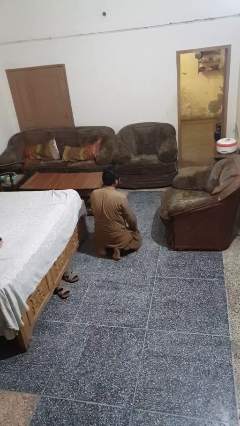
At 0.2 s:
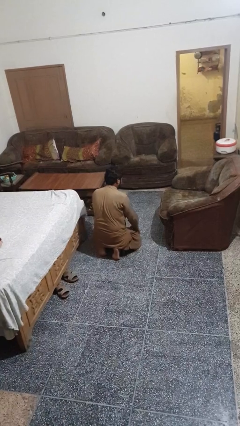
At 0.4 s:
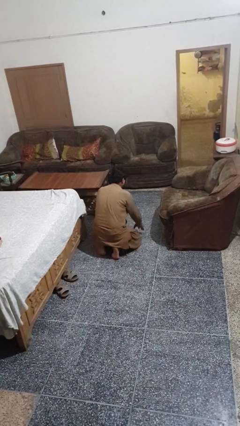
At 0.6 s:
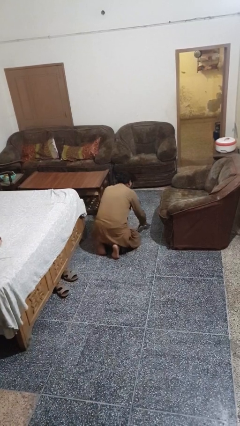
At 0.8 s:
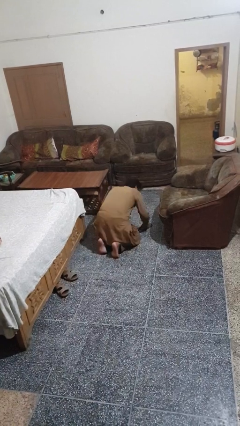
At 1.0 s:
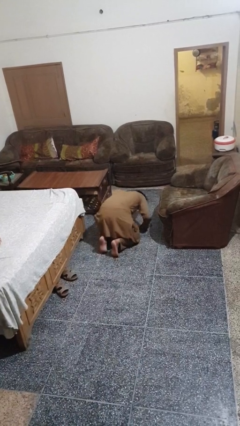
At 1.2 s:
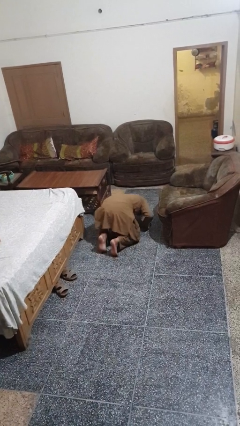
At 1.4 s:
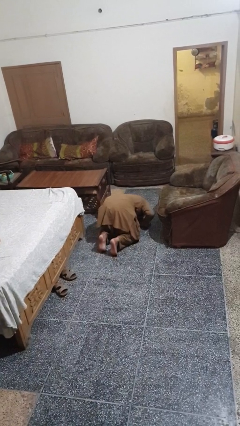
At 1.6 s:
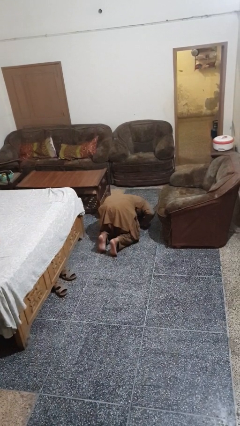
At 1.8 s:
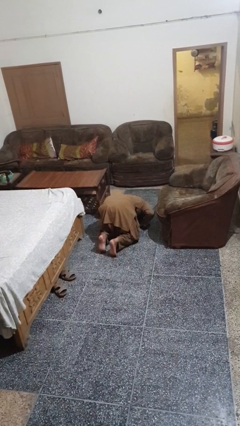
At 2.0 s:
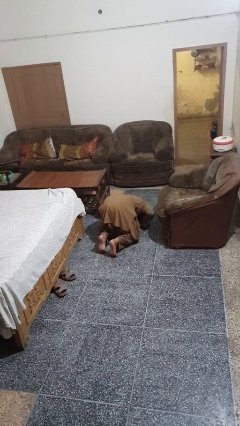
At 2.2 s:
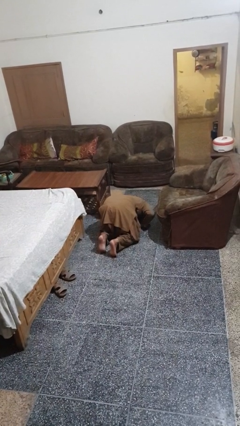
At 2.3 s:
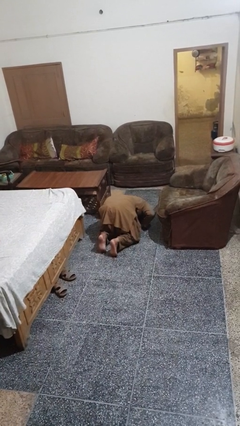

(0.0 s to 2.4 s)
person searches under couch

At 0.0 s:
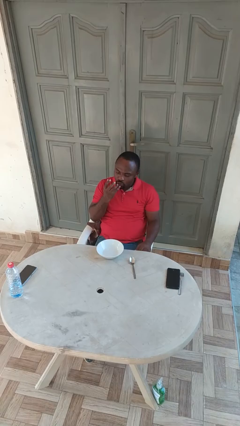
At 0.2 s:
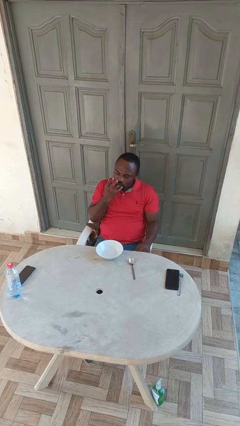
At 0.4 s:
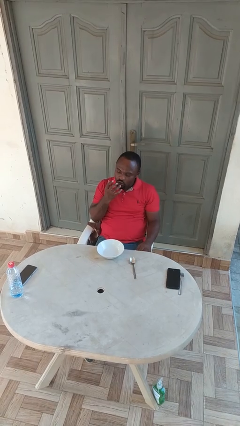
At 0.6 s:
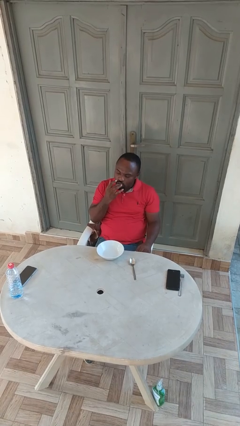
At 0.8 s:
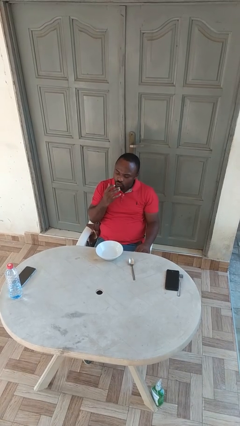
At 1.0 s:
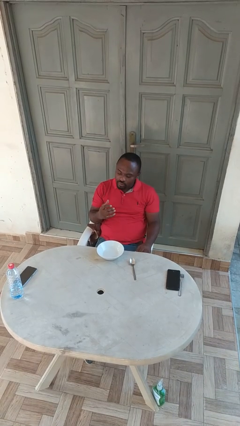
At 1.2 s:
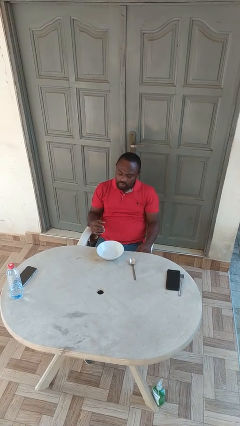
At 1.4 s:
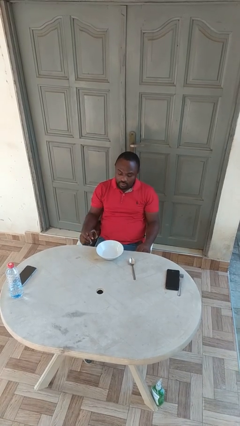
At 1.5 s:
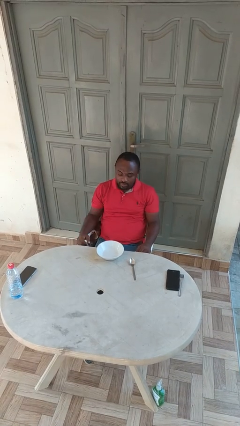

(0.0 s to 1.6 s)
person licks fingers

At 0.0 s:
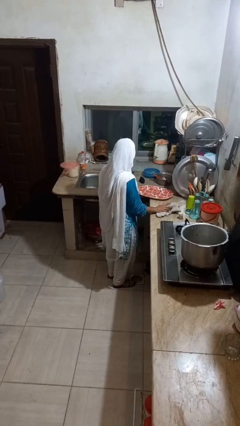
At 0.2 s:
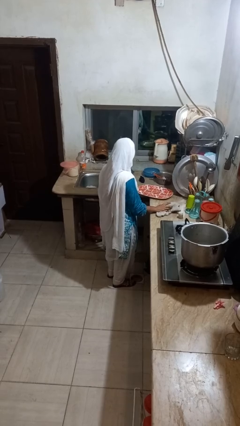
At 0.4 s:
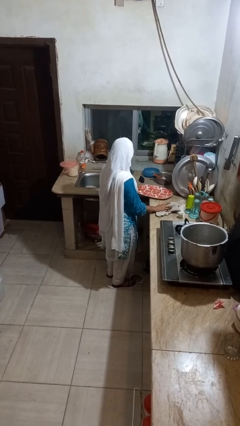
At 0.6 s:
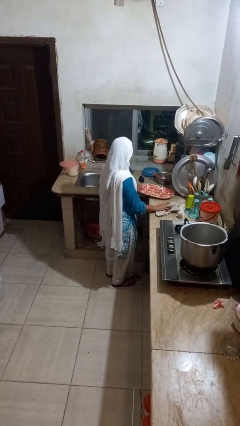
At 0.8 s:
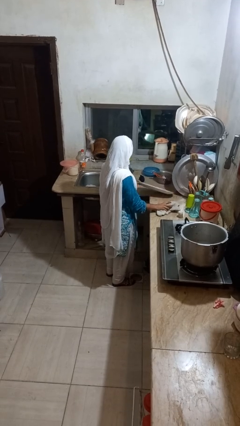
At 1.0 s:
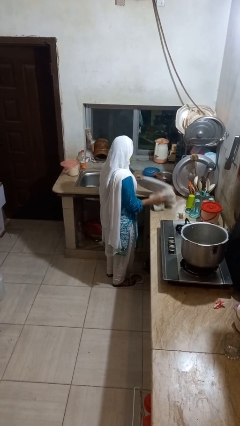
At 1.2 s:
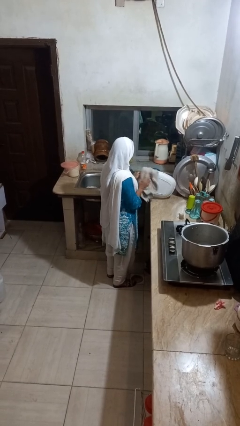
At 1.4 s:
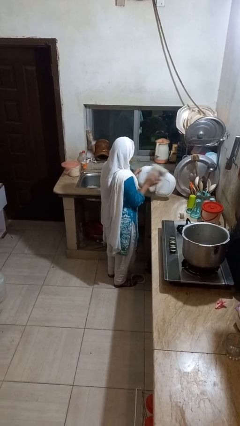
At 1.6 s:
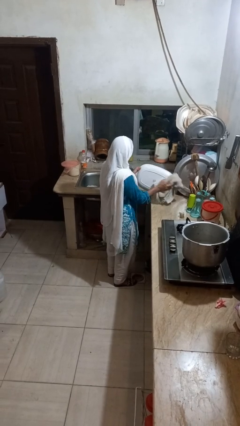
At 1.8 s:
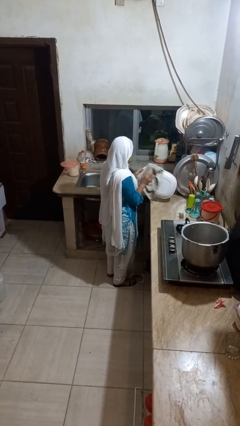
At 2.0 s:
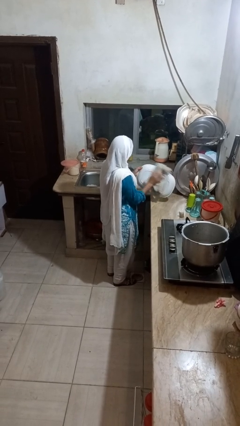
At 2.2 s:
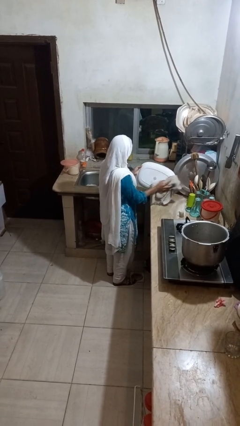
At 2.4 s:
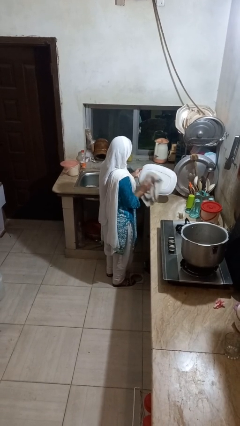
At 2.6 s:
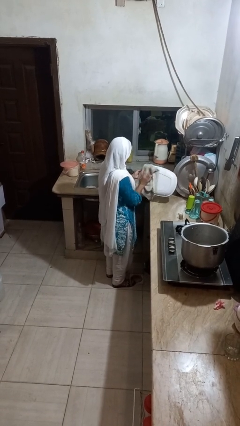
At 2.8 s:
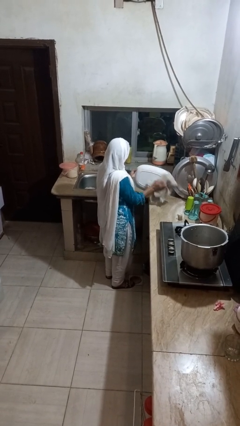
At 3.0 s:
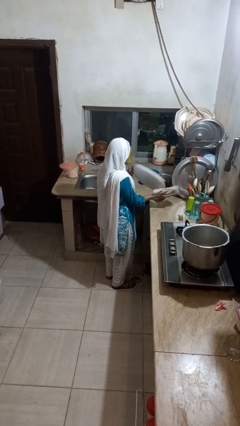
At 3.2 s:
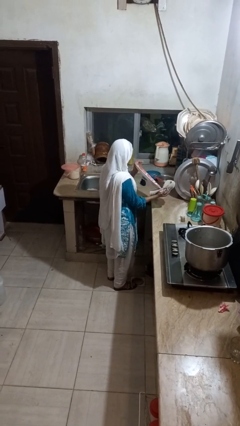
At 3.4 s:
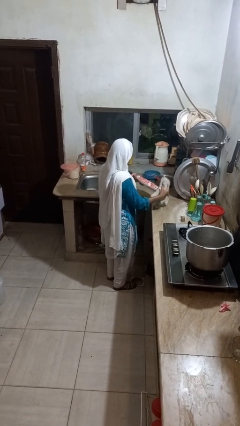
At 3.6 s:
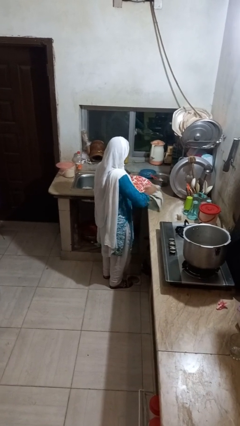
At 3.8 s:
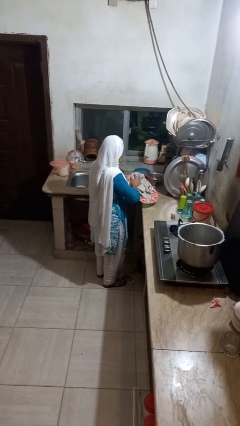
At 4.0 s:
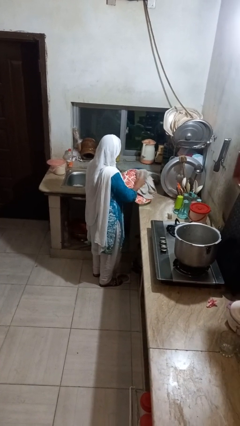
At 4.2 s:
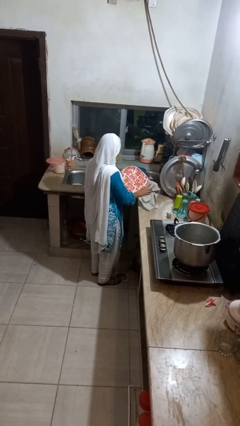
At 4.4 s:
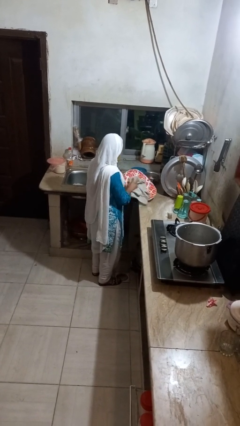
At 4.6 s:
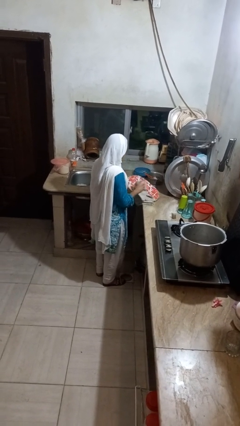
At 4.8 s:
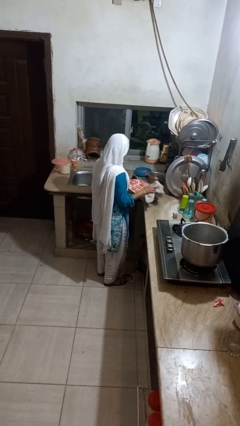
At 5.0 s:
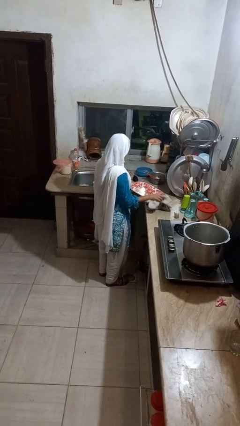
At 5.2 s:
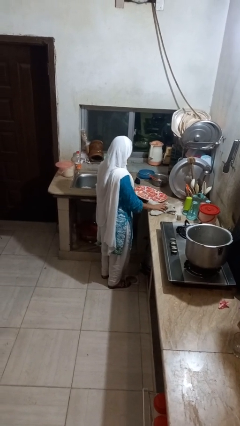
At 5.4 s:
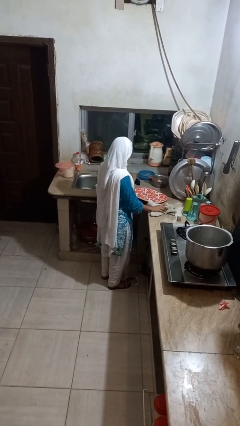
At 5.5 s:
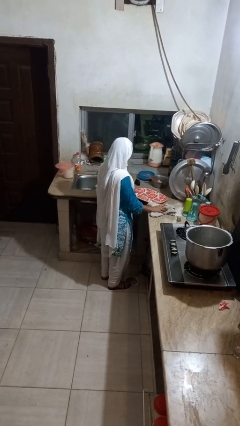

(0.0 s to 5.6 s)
person dries dish

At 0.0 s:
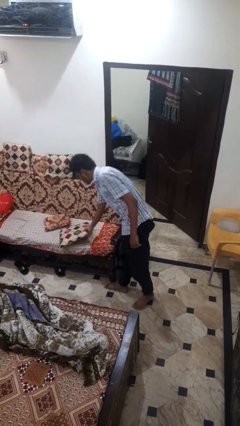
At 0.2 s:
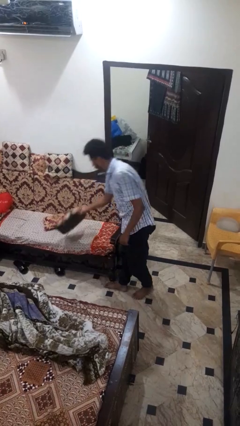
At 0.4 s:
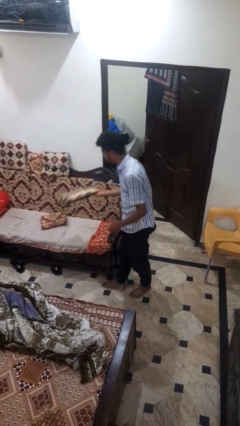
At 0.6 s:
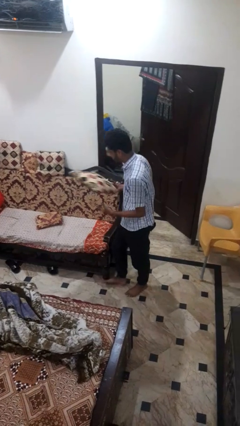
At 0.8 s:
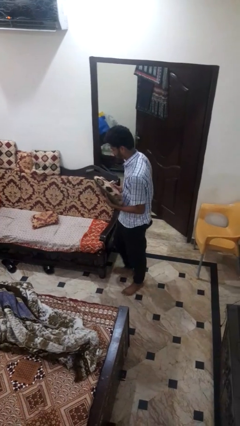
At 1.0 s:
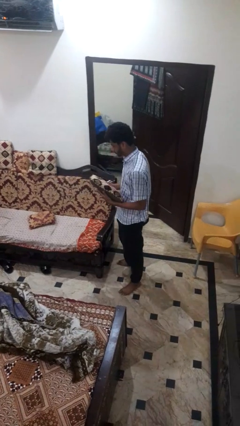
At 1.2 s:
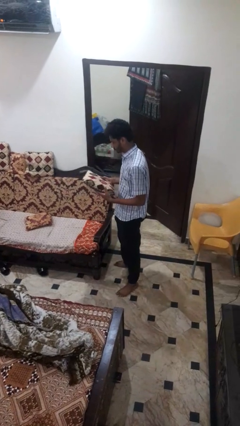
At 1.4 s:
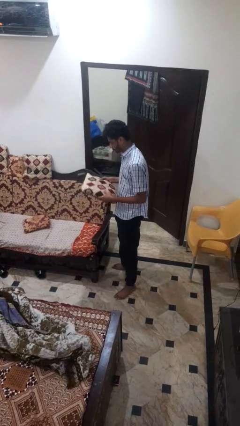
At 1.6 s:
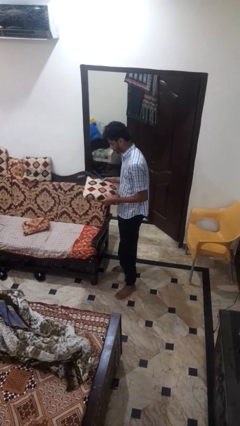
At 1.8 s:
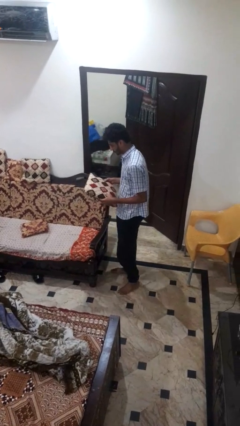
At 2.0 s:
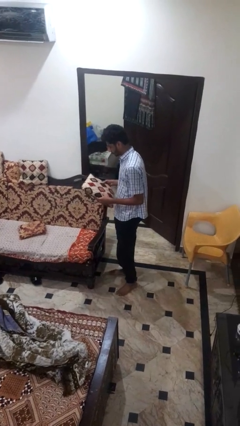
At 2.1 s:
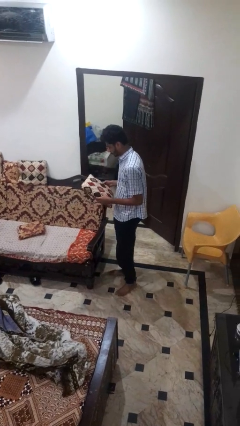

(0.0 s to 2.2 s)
person picks up object from couch

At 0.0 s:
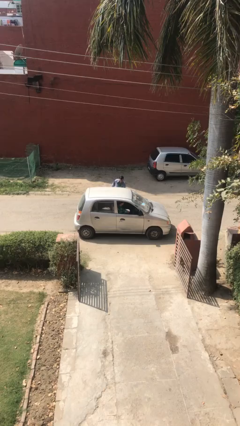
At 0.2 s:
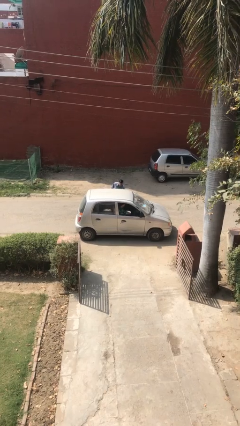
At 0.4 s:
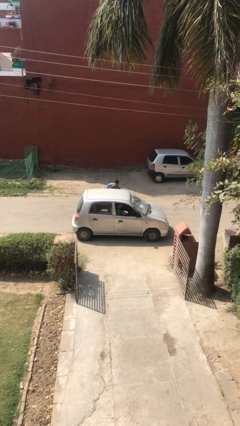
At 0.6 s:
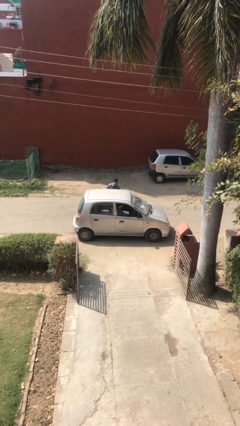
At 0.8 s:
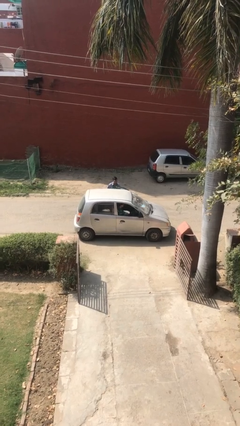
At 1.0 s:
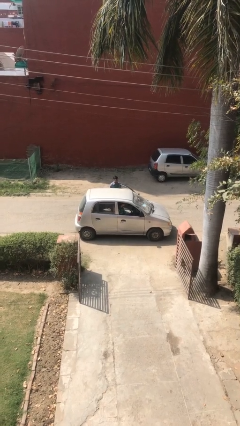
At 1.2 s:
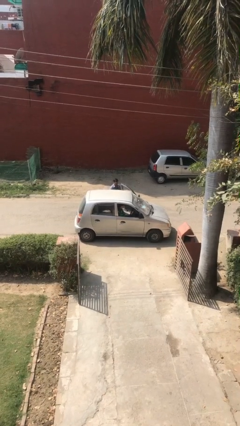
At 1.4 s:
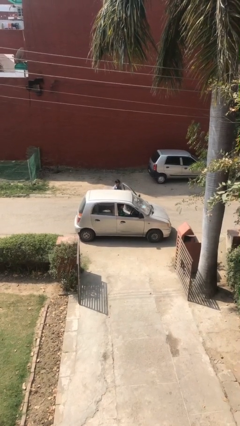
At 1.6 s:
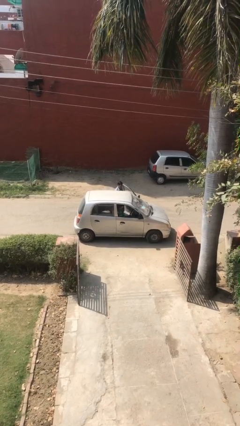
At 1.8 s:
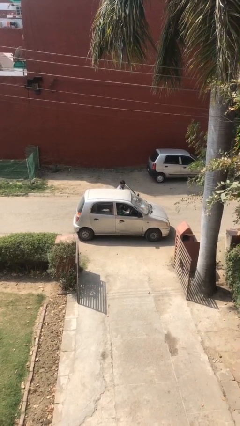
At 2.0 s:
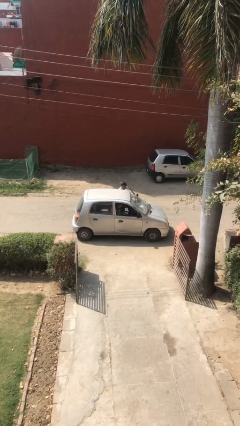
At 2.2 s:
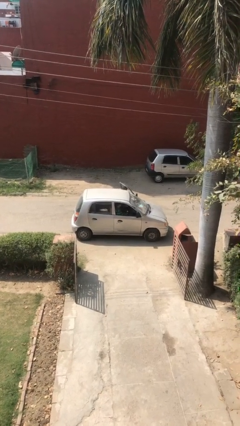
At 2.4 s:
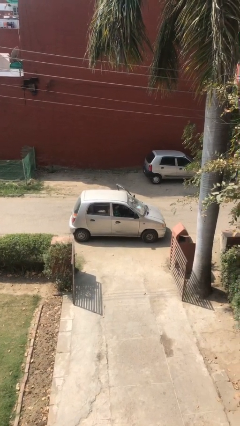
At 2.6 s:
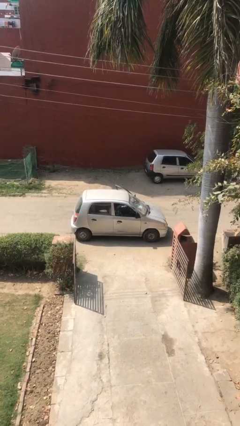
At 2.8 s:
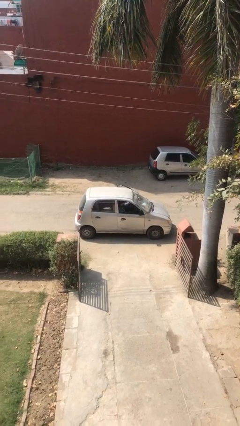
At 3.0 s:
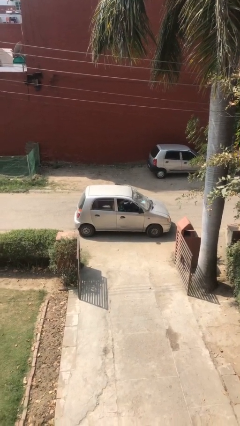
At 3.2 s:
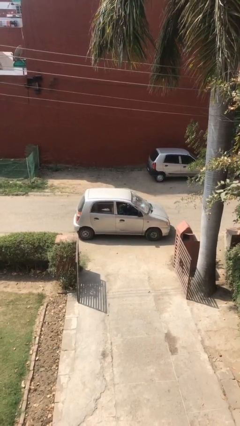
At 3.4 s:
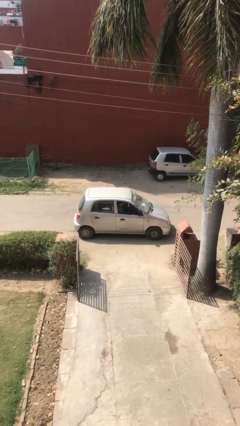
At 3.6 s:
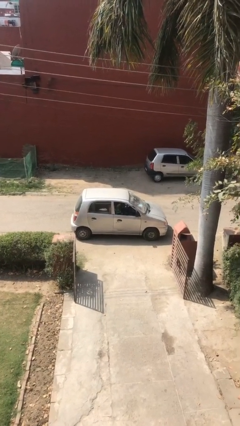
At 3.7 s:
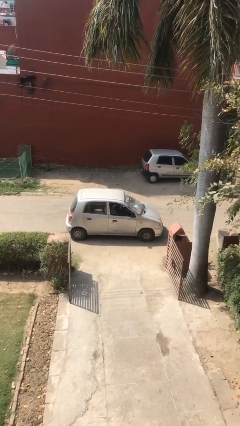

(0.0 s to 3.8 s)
car picks up person

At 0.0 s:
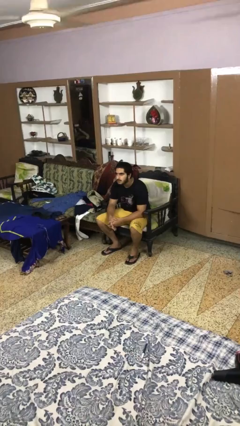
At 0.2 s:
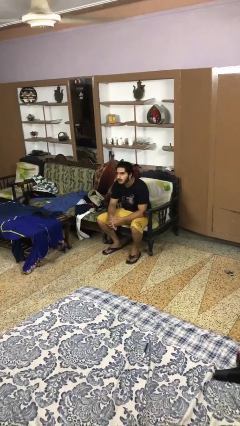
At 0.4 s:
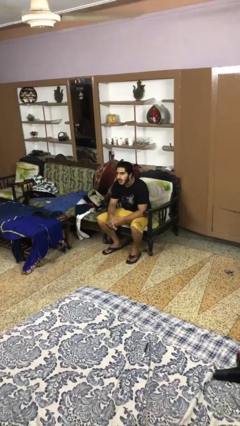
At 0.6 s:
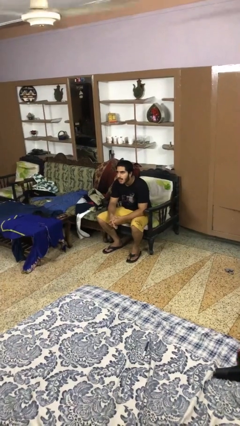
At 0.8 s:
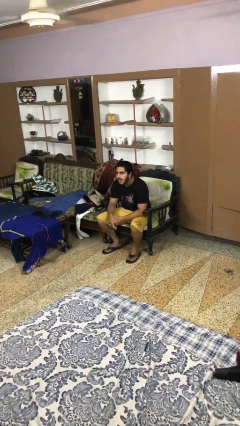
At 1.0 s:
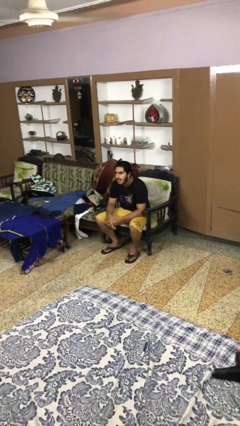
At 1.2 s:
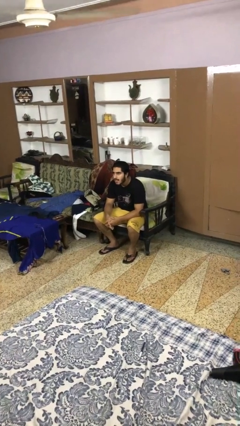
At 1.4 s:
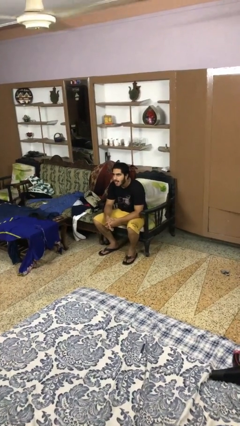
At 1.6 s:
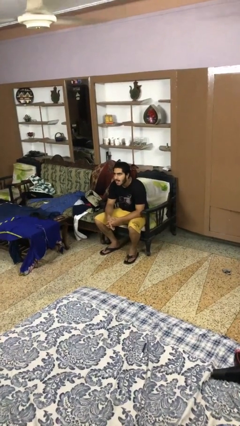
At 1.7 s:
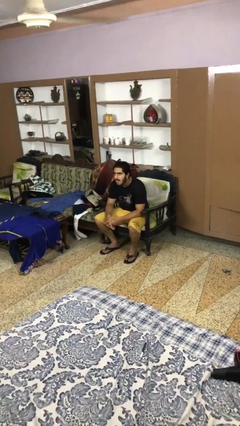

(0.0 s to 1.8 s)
person sticks out tongue

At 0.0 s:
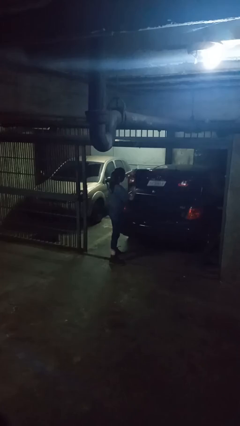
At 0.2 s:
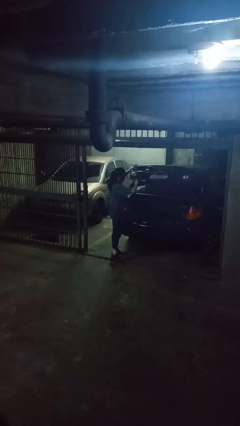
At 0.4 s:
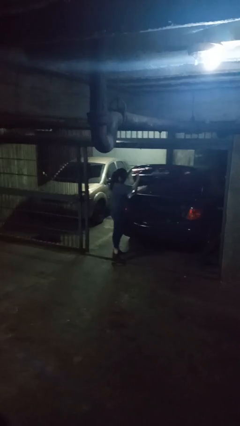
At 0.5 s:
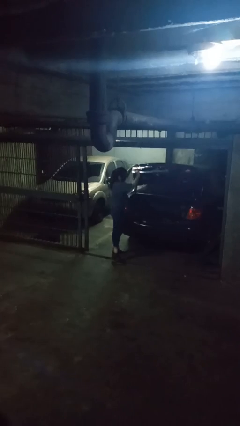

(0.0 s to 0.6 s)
person opens car trunk
